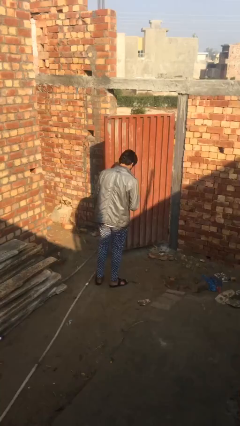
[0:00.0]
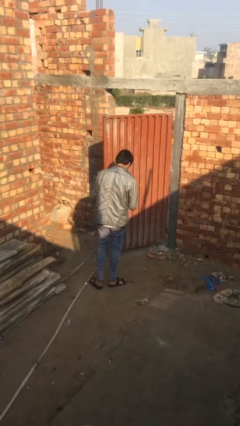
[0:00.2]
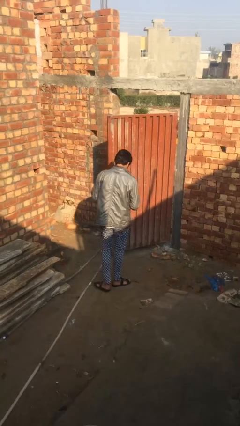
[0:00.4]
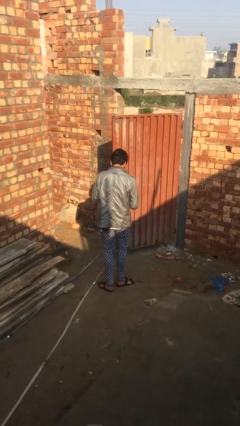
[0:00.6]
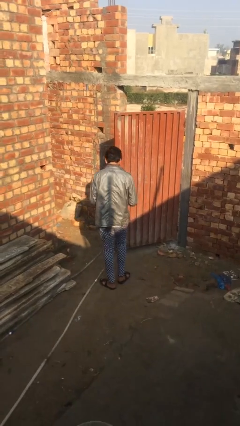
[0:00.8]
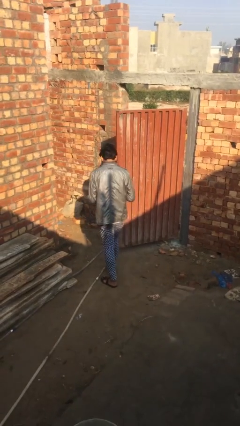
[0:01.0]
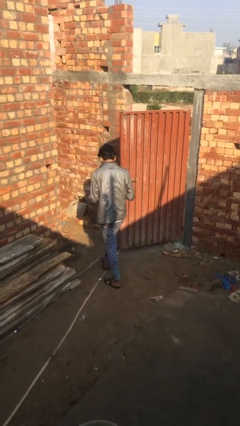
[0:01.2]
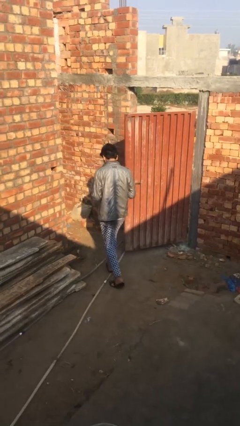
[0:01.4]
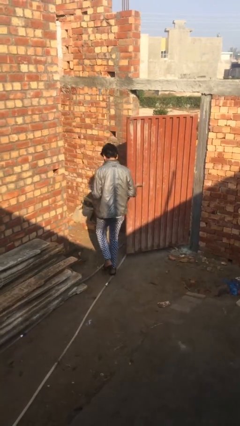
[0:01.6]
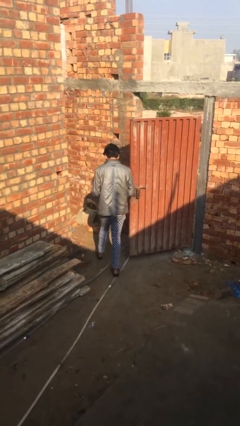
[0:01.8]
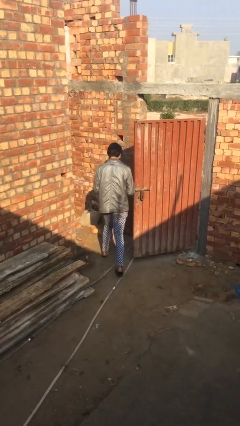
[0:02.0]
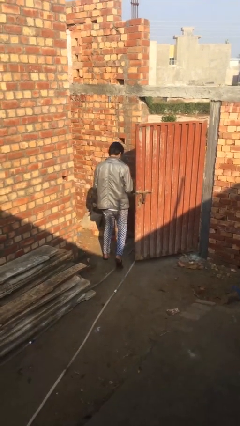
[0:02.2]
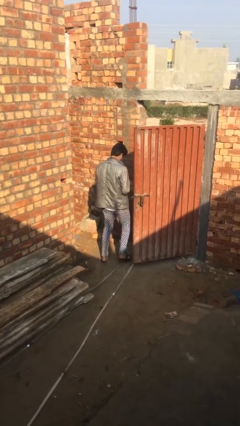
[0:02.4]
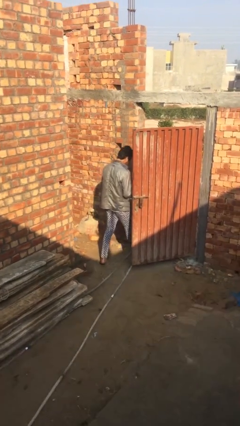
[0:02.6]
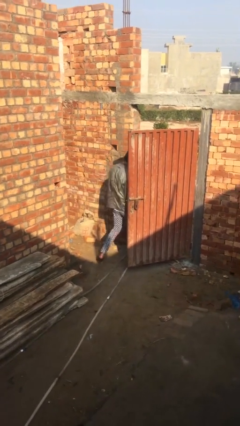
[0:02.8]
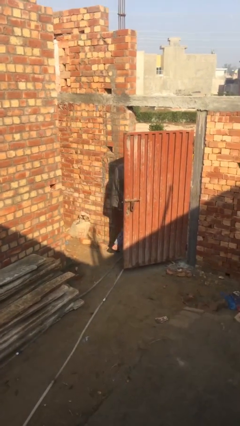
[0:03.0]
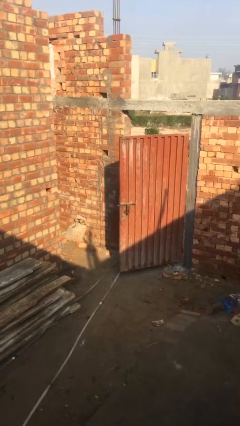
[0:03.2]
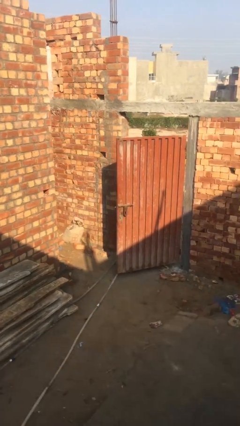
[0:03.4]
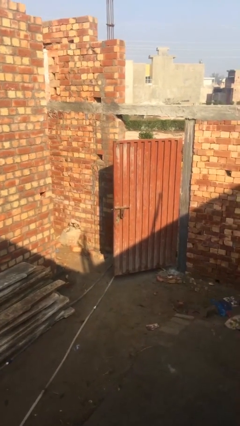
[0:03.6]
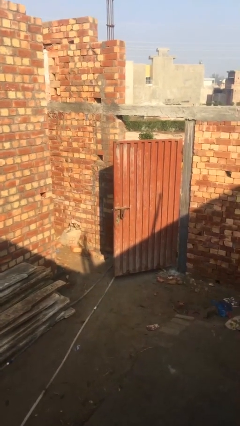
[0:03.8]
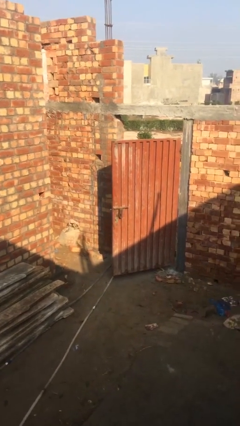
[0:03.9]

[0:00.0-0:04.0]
person exits scene through structure

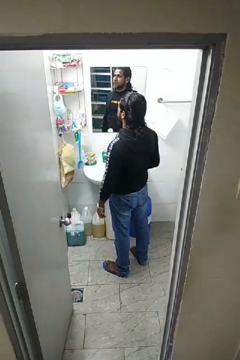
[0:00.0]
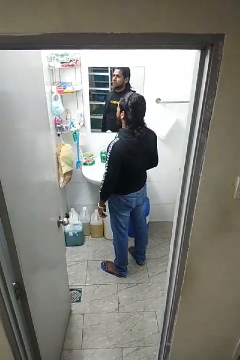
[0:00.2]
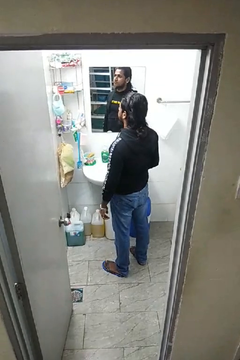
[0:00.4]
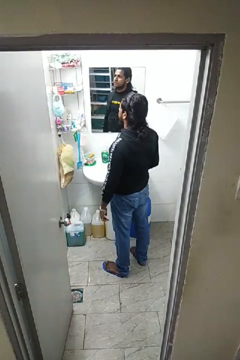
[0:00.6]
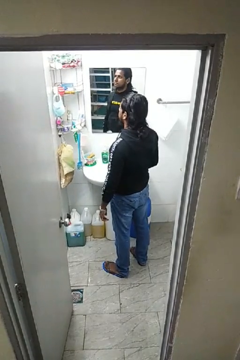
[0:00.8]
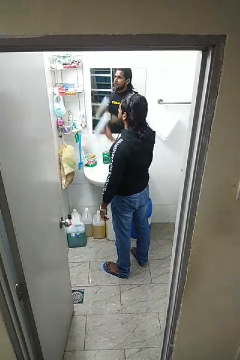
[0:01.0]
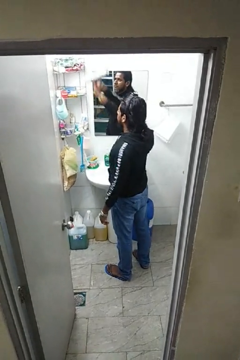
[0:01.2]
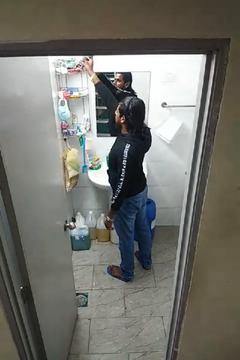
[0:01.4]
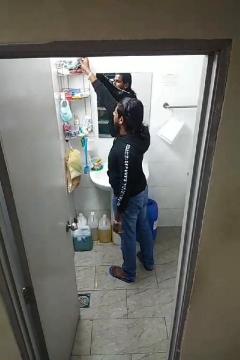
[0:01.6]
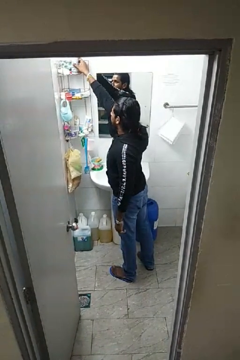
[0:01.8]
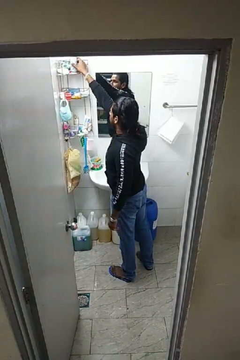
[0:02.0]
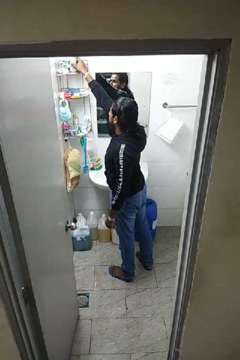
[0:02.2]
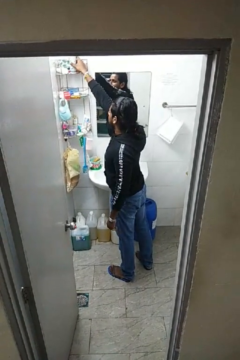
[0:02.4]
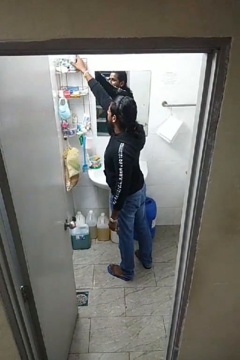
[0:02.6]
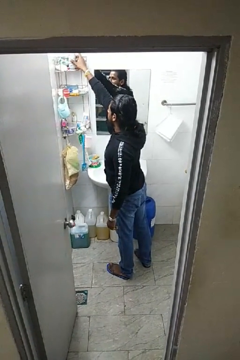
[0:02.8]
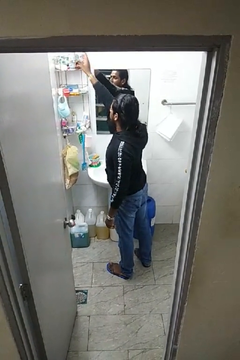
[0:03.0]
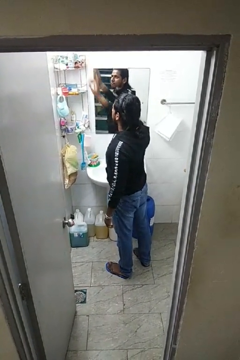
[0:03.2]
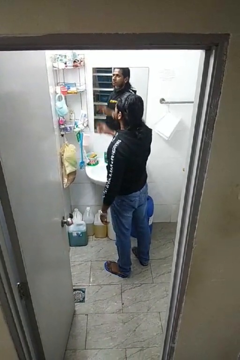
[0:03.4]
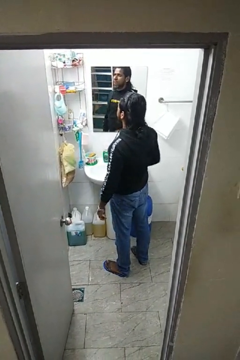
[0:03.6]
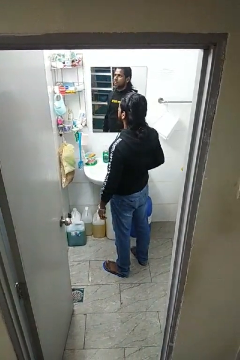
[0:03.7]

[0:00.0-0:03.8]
person puts down object on countertop

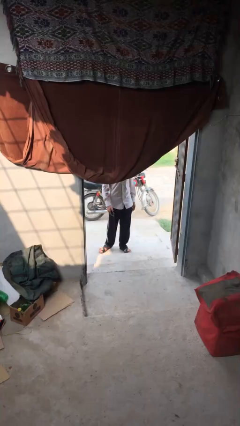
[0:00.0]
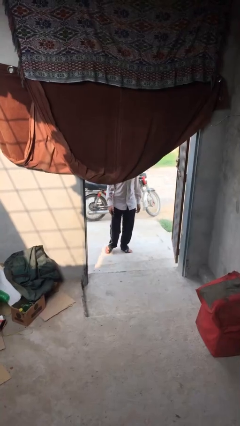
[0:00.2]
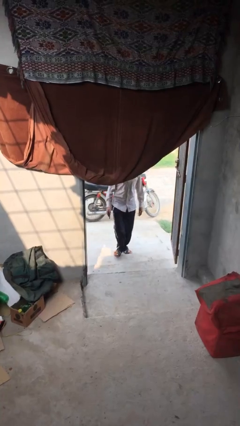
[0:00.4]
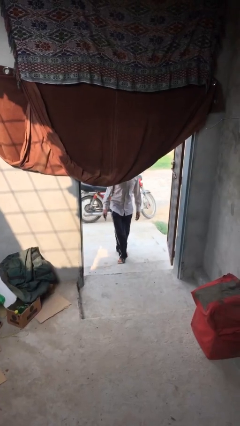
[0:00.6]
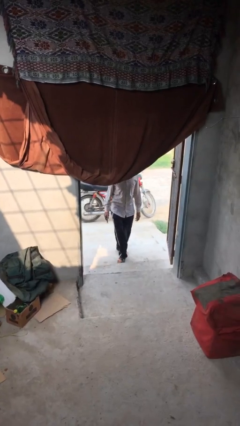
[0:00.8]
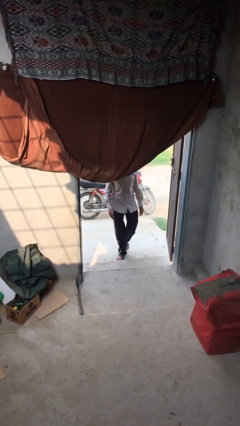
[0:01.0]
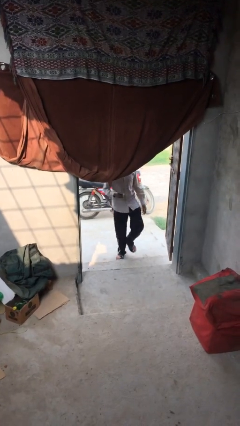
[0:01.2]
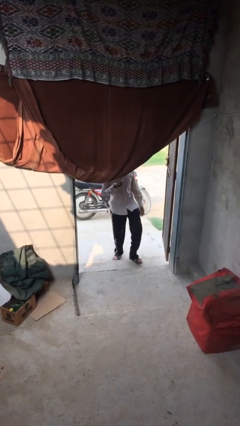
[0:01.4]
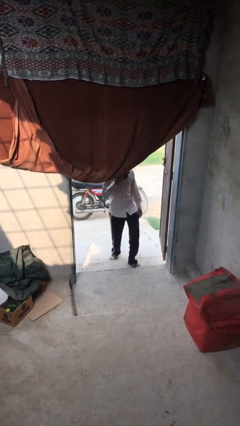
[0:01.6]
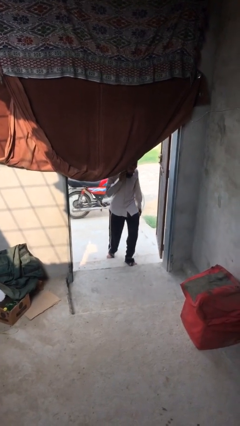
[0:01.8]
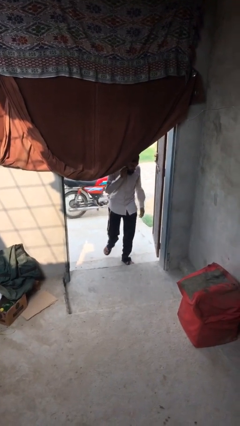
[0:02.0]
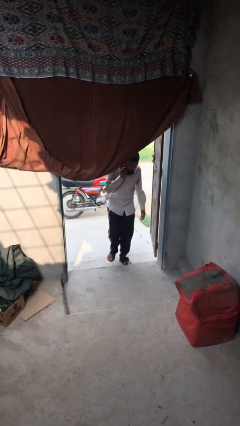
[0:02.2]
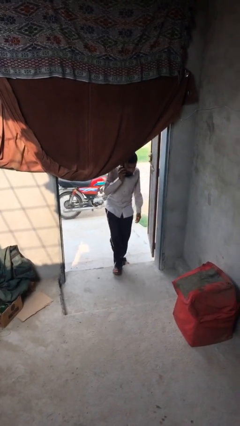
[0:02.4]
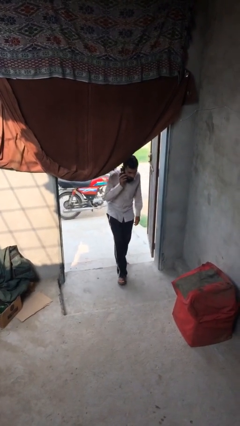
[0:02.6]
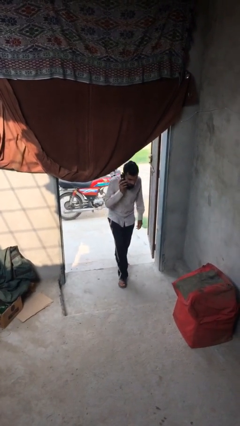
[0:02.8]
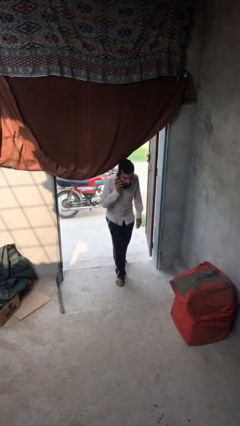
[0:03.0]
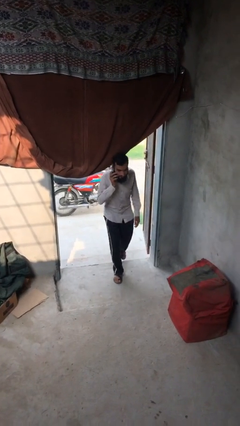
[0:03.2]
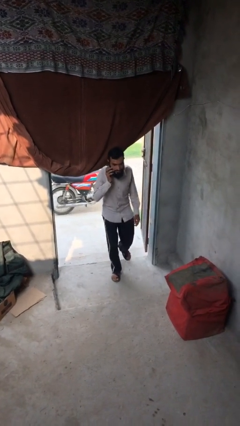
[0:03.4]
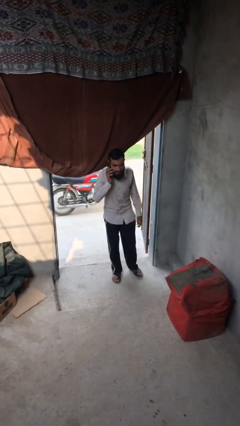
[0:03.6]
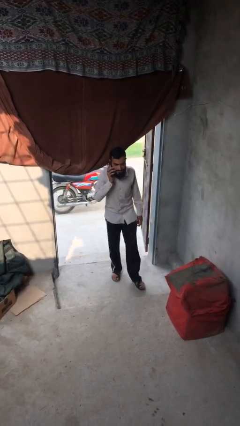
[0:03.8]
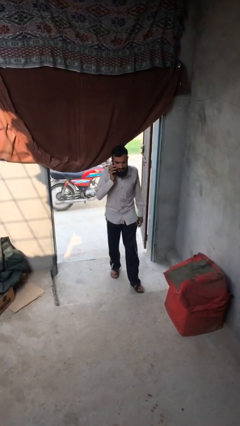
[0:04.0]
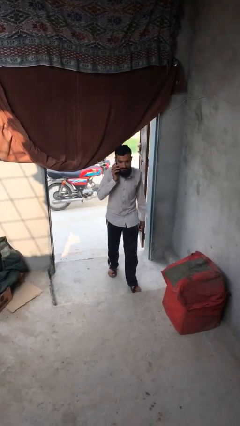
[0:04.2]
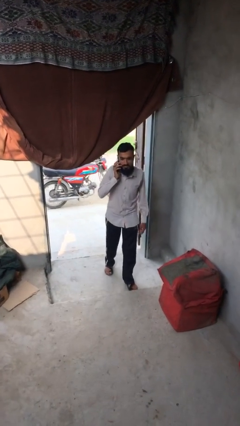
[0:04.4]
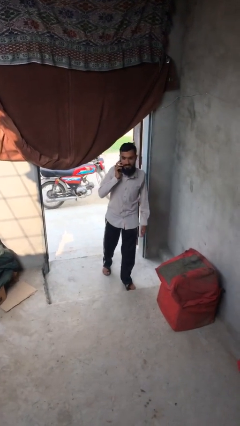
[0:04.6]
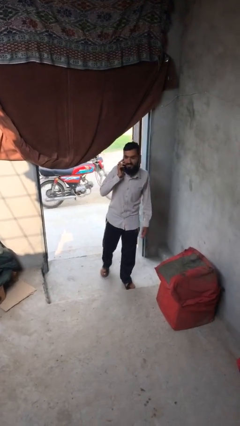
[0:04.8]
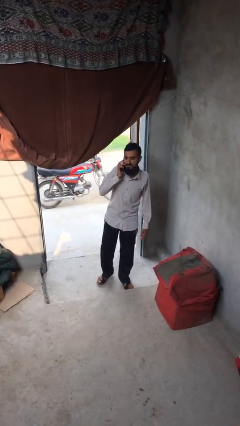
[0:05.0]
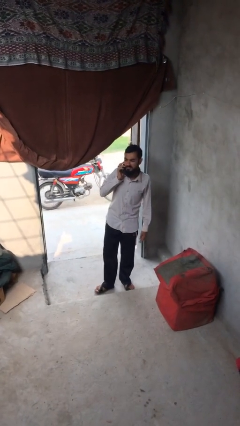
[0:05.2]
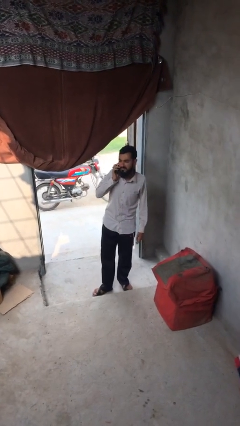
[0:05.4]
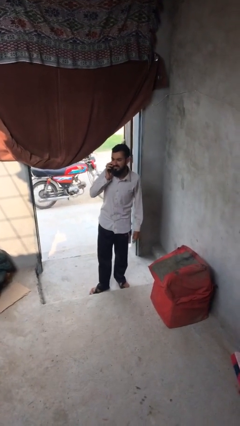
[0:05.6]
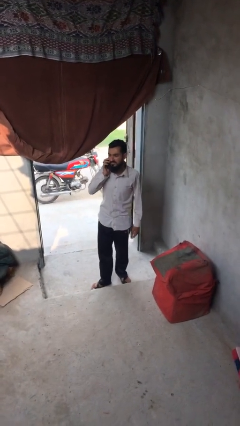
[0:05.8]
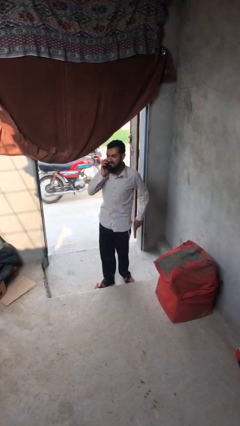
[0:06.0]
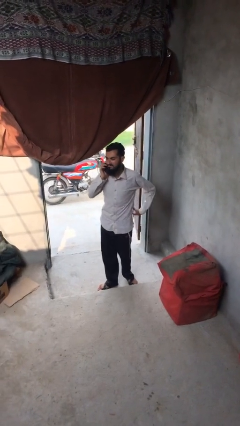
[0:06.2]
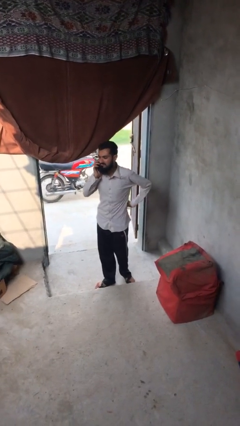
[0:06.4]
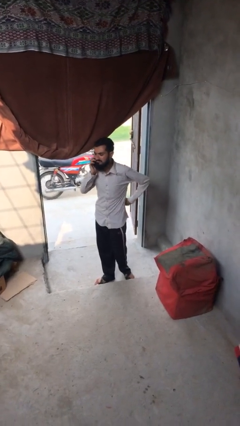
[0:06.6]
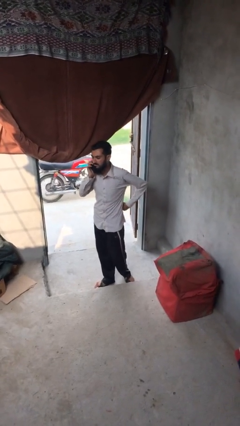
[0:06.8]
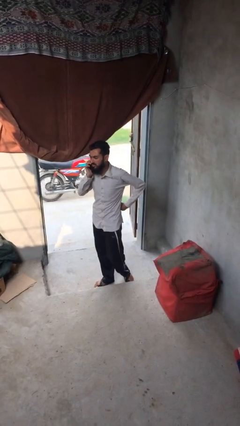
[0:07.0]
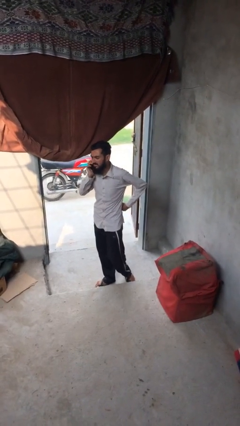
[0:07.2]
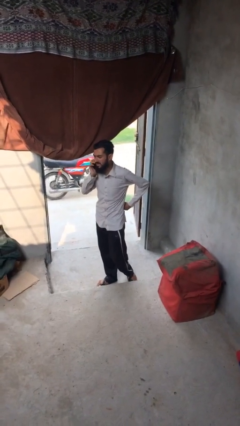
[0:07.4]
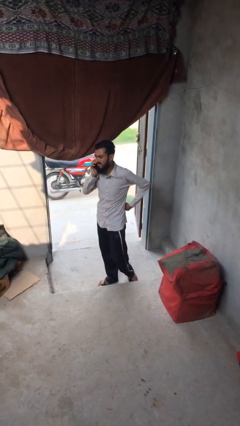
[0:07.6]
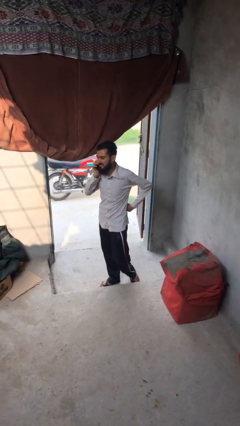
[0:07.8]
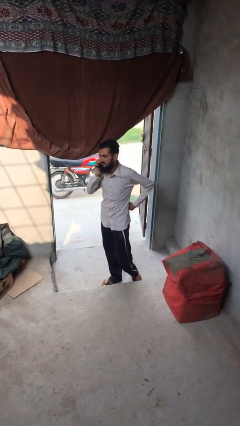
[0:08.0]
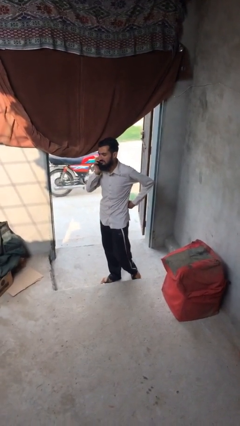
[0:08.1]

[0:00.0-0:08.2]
person enters scene through structure

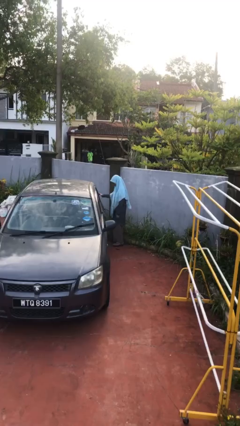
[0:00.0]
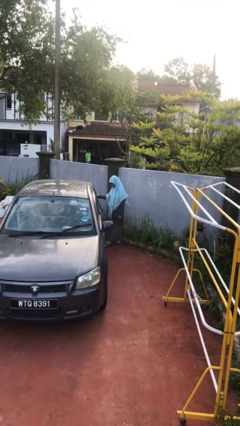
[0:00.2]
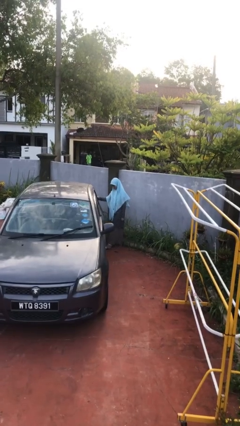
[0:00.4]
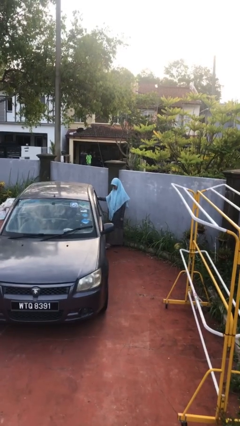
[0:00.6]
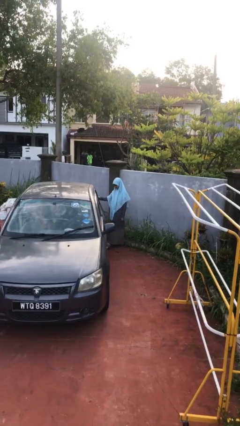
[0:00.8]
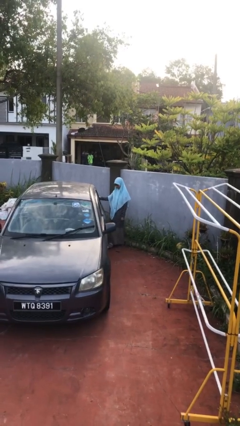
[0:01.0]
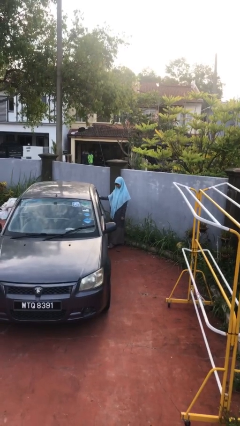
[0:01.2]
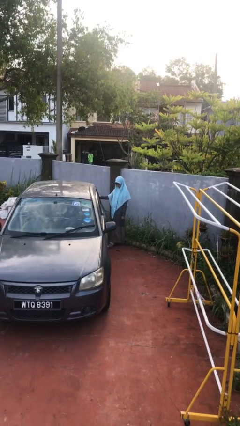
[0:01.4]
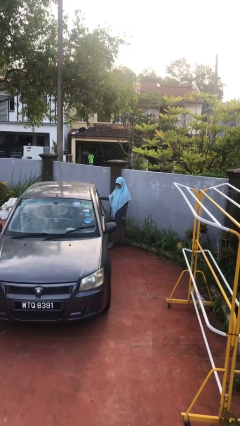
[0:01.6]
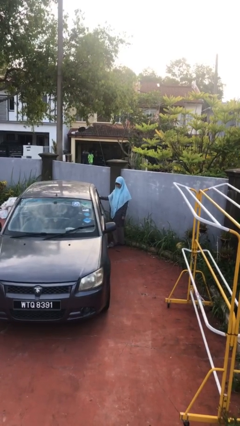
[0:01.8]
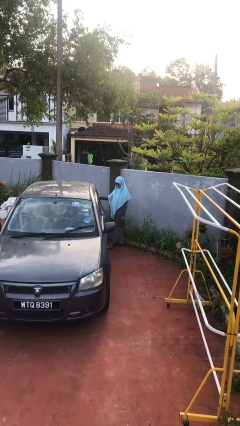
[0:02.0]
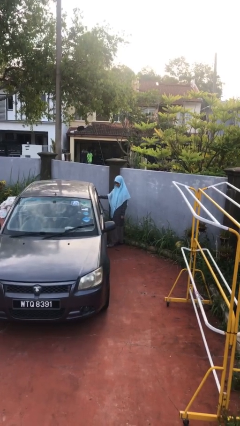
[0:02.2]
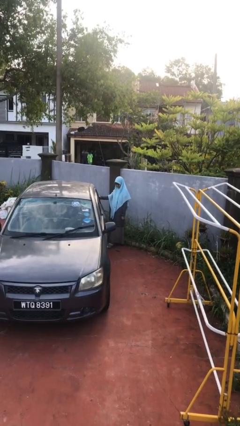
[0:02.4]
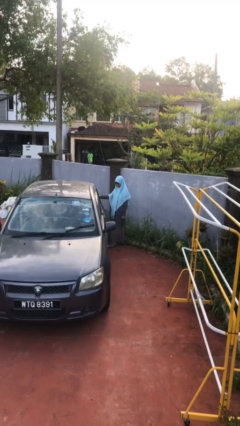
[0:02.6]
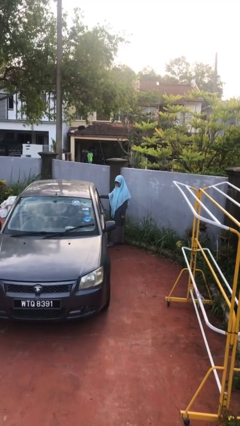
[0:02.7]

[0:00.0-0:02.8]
person kicks car tires
